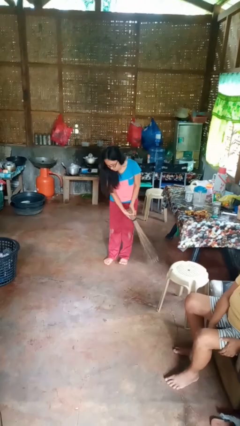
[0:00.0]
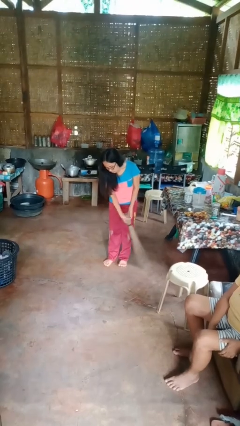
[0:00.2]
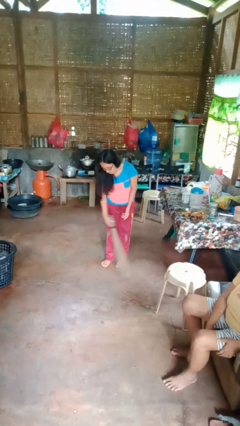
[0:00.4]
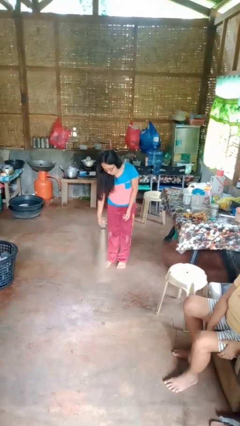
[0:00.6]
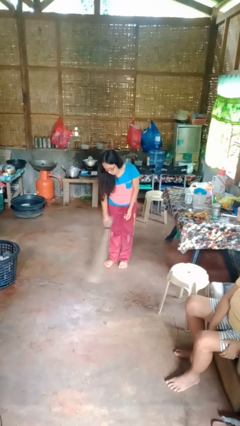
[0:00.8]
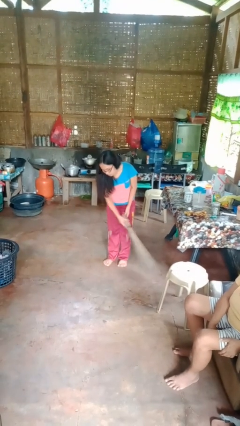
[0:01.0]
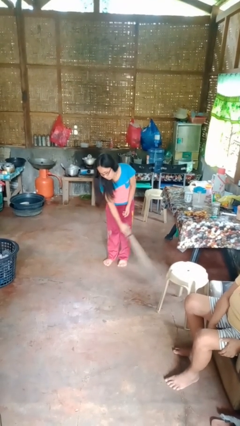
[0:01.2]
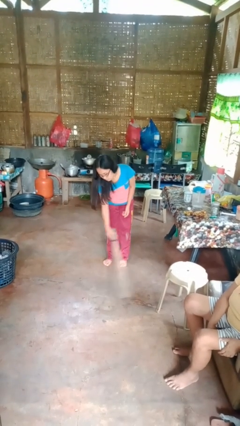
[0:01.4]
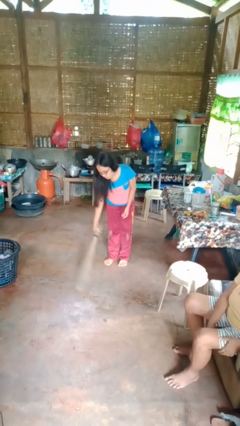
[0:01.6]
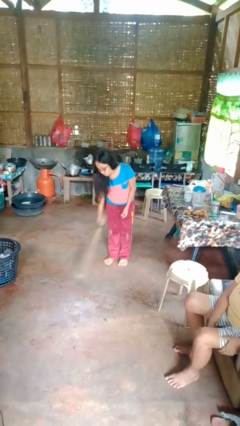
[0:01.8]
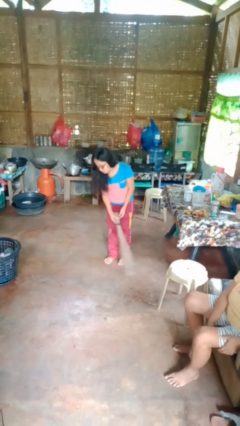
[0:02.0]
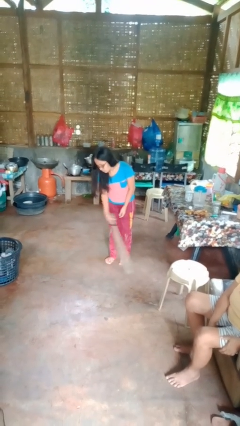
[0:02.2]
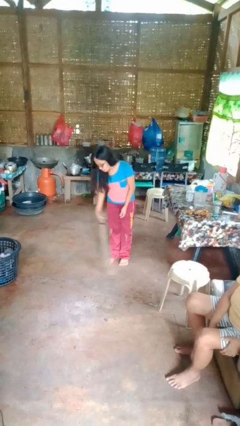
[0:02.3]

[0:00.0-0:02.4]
person sweeps floor

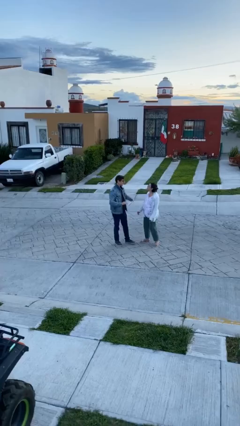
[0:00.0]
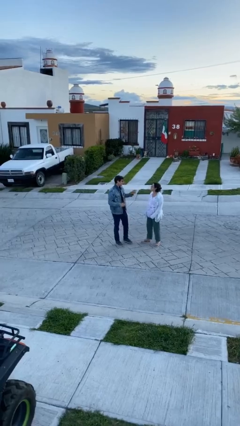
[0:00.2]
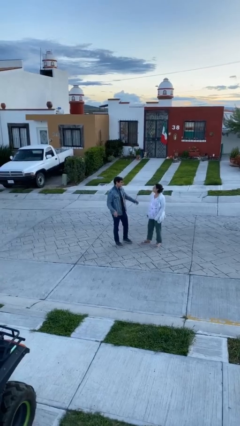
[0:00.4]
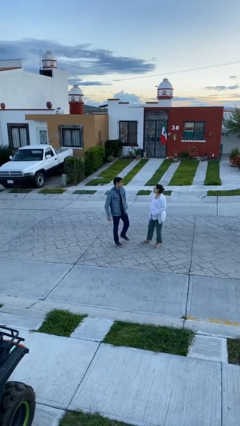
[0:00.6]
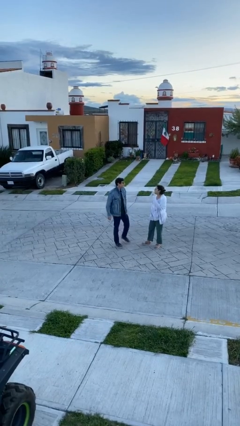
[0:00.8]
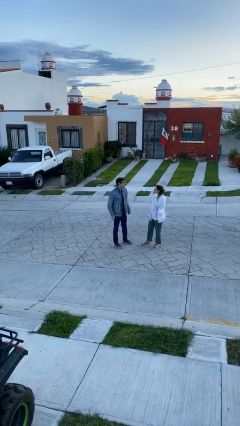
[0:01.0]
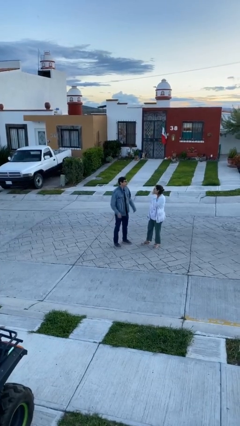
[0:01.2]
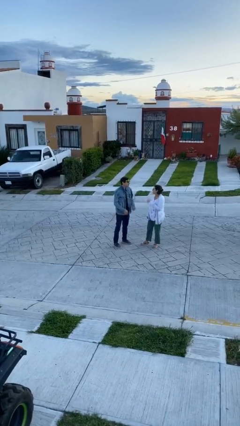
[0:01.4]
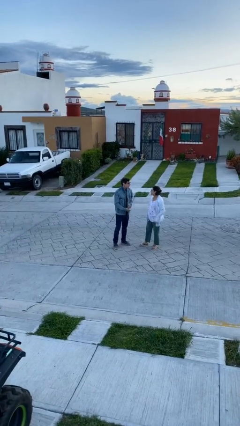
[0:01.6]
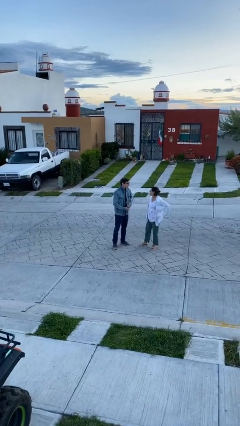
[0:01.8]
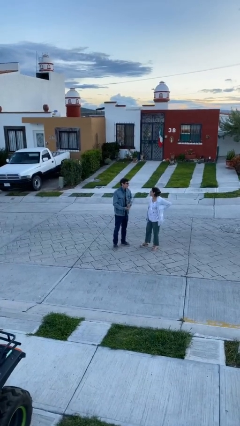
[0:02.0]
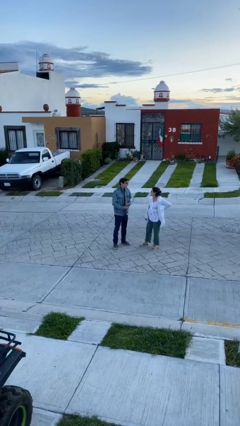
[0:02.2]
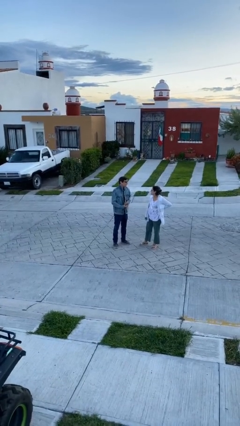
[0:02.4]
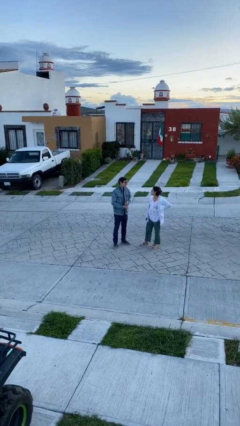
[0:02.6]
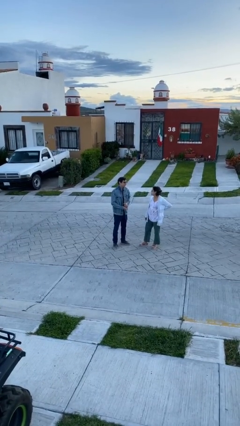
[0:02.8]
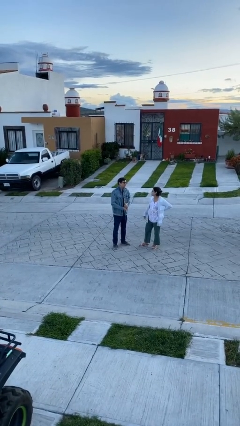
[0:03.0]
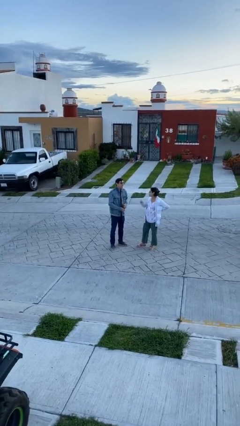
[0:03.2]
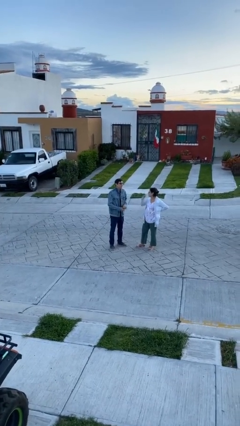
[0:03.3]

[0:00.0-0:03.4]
person talks to person

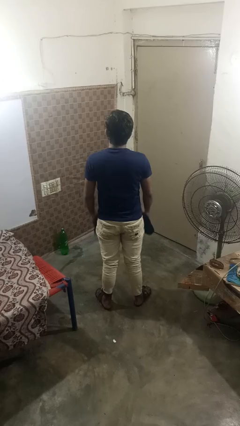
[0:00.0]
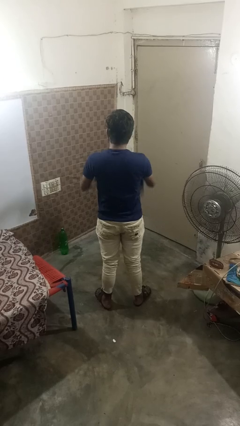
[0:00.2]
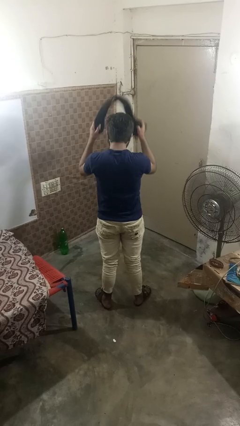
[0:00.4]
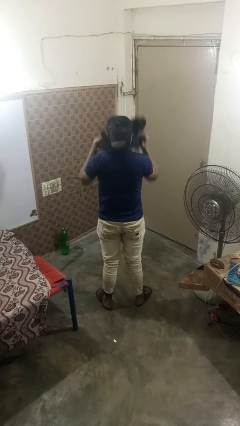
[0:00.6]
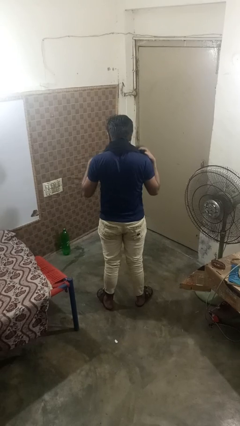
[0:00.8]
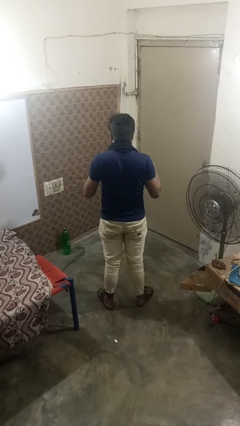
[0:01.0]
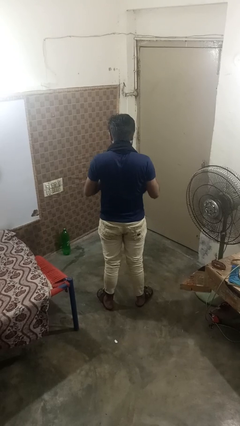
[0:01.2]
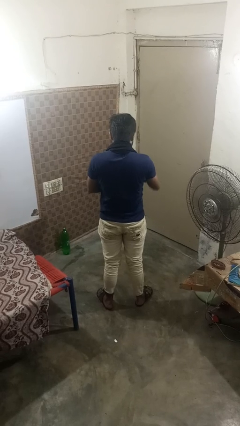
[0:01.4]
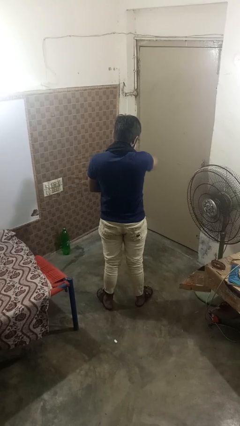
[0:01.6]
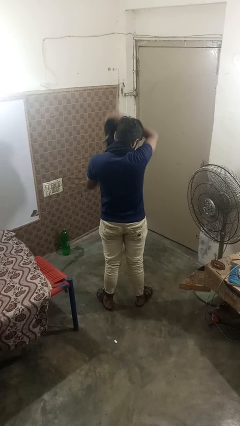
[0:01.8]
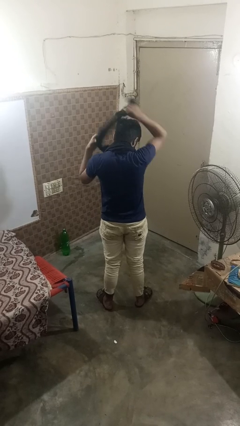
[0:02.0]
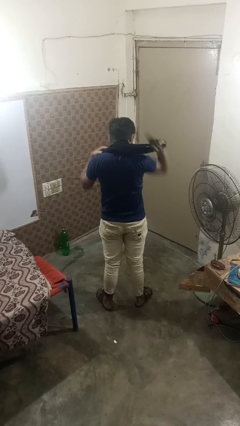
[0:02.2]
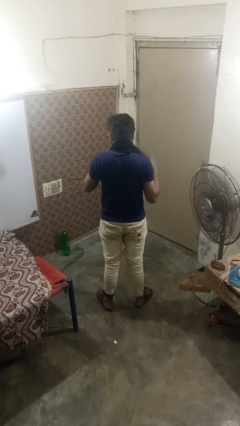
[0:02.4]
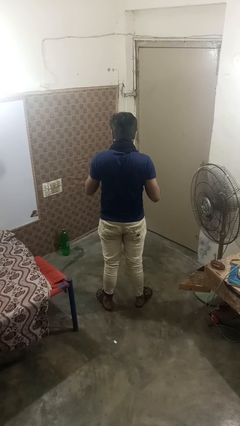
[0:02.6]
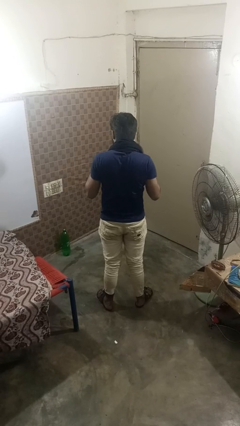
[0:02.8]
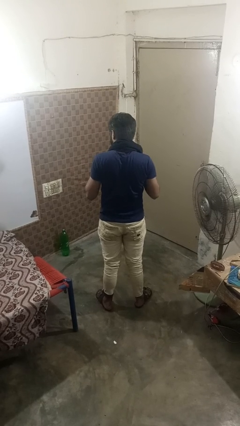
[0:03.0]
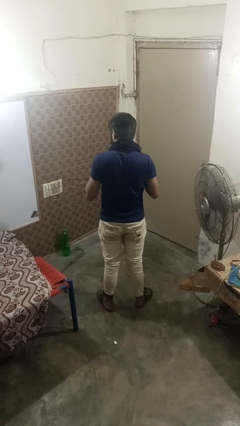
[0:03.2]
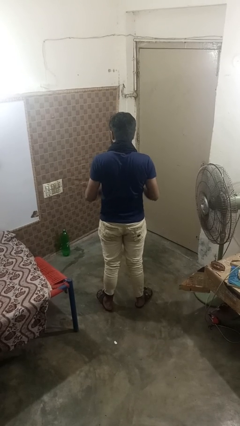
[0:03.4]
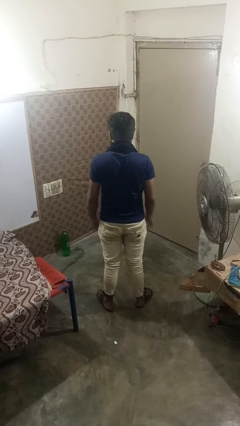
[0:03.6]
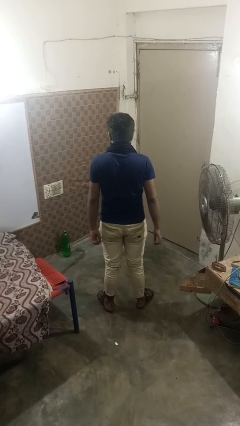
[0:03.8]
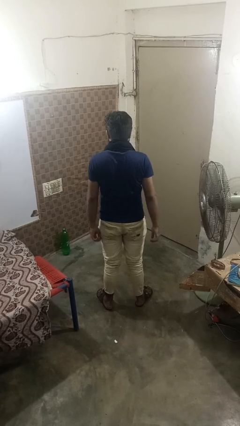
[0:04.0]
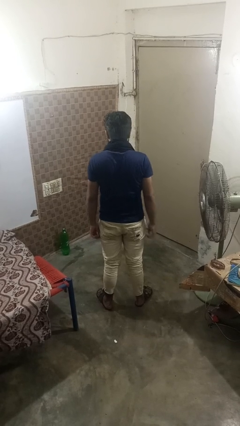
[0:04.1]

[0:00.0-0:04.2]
person puts on scarf

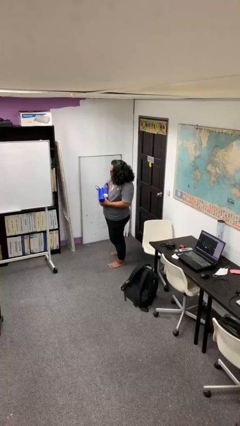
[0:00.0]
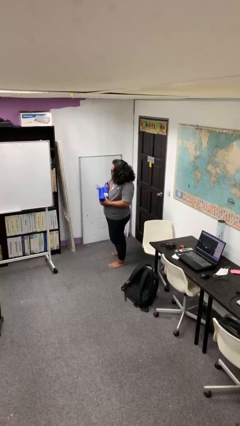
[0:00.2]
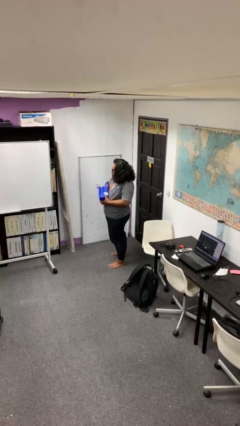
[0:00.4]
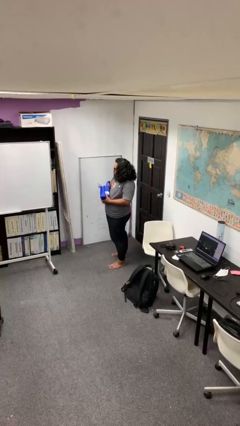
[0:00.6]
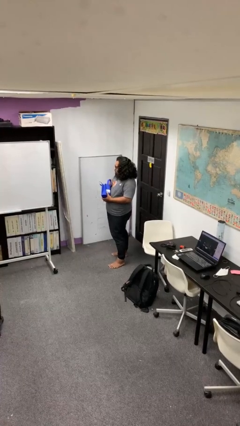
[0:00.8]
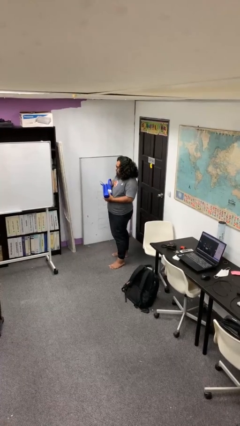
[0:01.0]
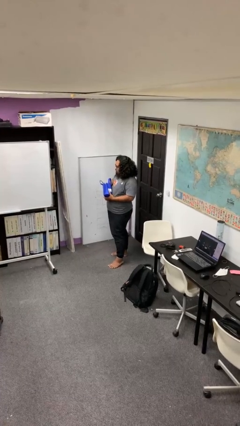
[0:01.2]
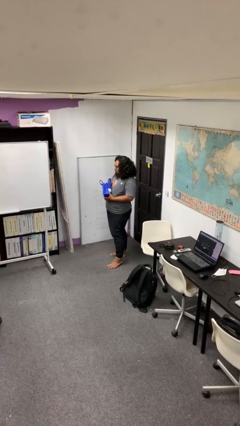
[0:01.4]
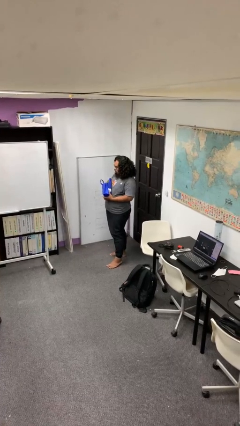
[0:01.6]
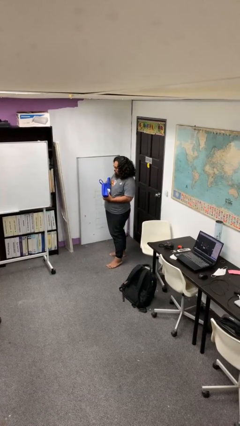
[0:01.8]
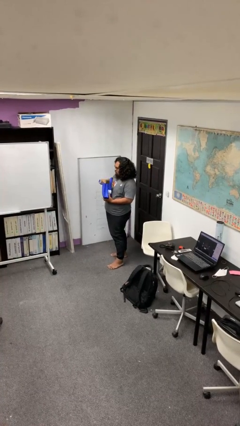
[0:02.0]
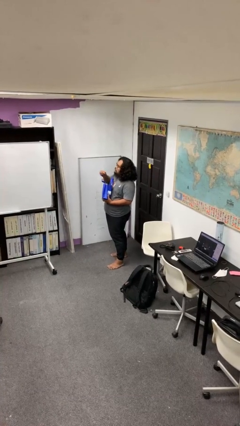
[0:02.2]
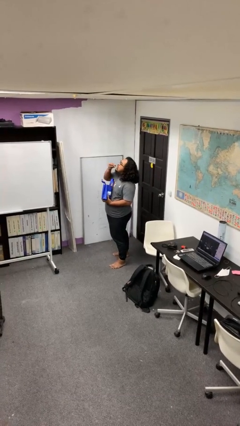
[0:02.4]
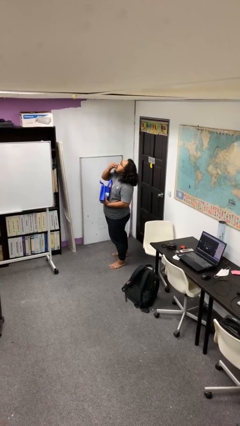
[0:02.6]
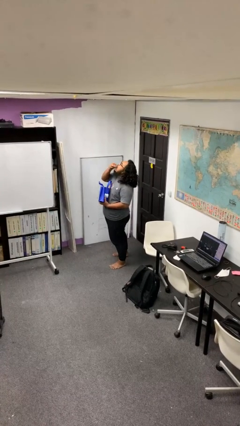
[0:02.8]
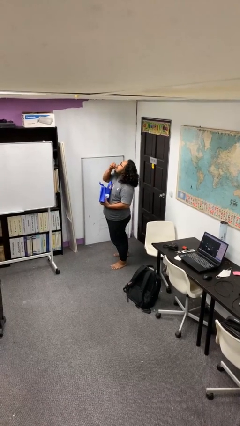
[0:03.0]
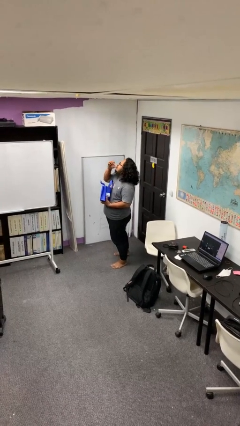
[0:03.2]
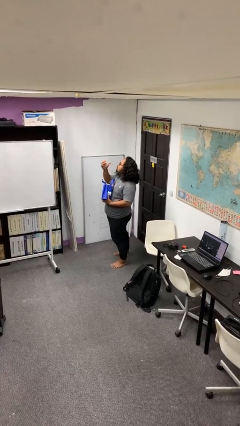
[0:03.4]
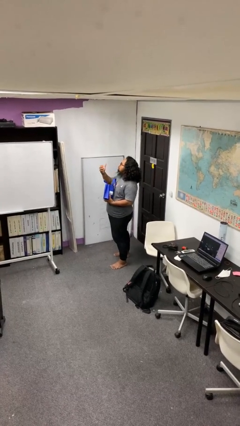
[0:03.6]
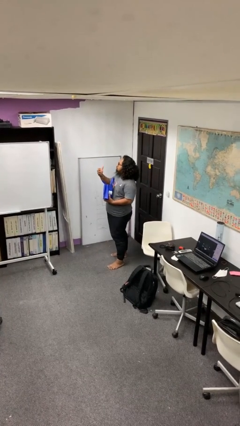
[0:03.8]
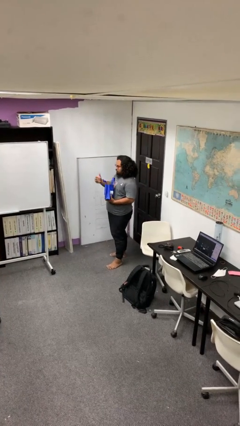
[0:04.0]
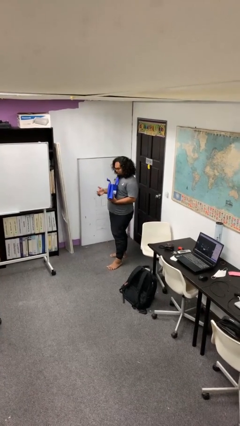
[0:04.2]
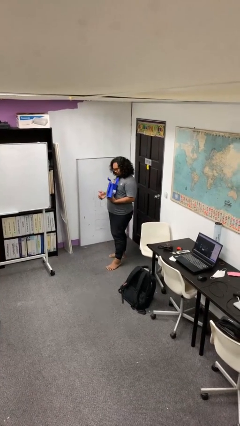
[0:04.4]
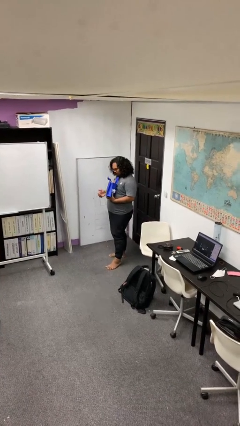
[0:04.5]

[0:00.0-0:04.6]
person eats snack from bag

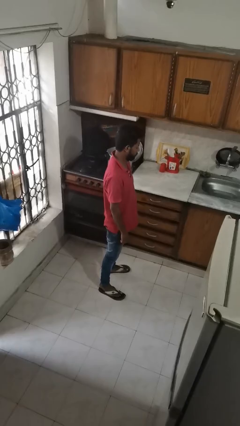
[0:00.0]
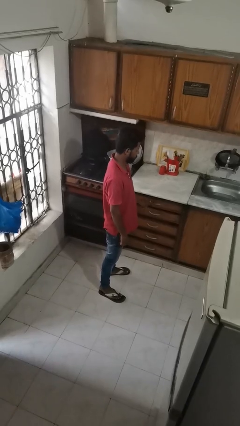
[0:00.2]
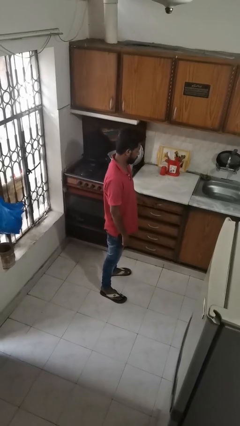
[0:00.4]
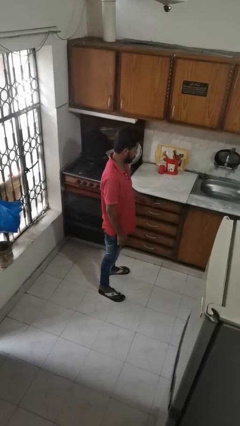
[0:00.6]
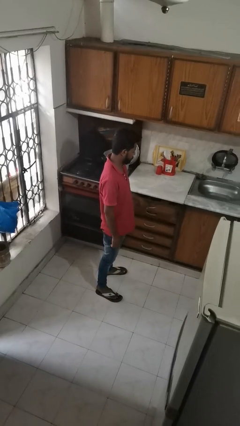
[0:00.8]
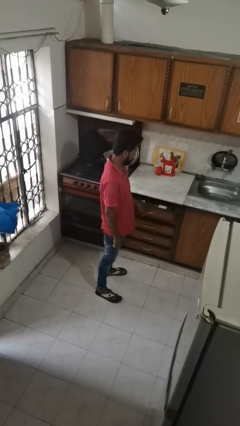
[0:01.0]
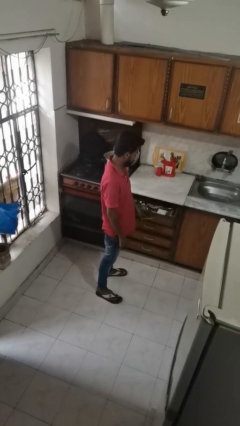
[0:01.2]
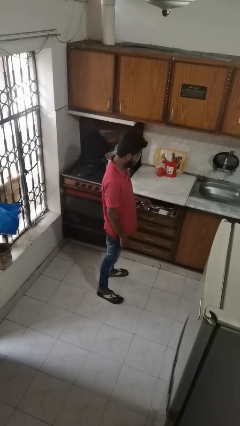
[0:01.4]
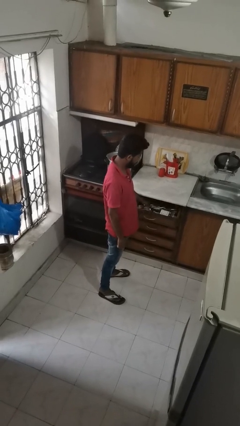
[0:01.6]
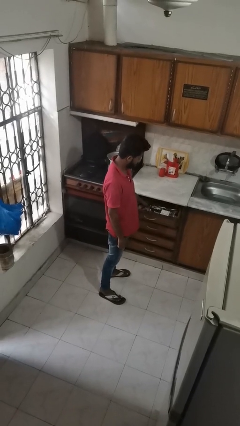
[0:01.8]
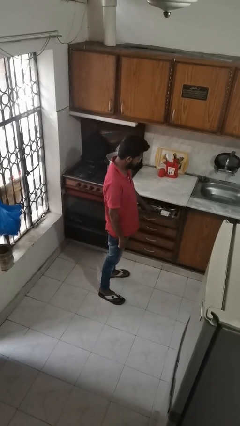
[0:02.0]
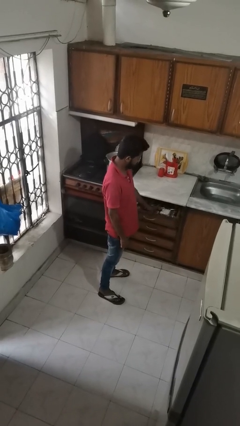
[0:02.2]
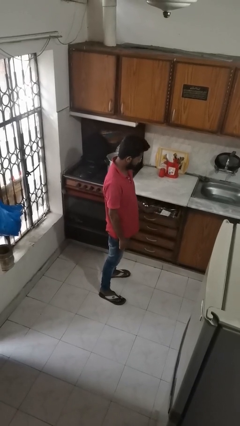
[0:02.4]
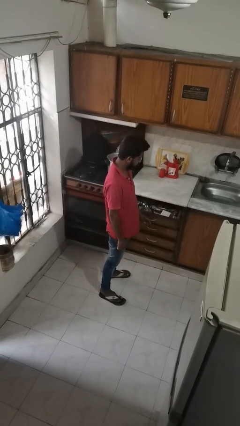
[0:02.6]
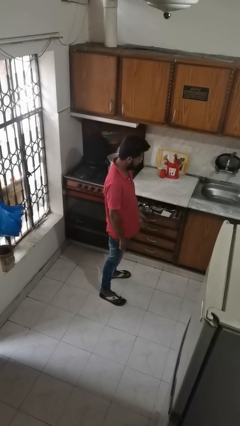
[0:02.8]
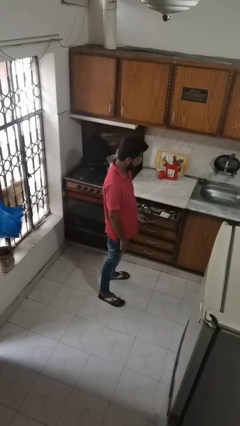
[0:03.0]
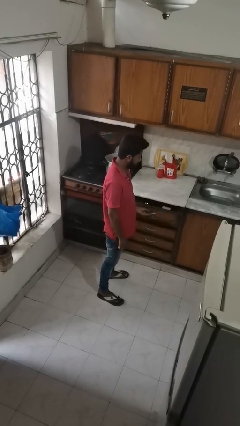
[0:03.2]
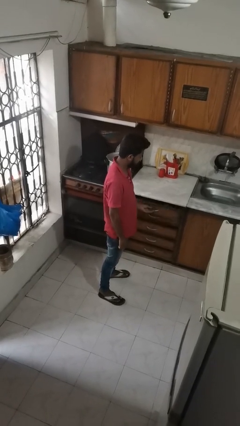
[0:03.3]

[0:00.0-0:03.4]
person searches in kitchen drawer
